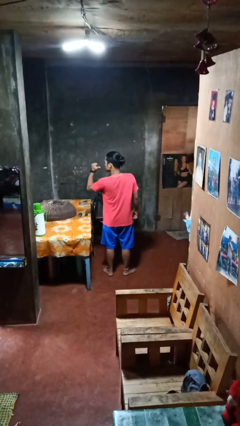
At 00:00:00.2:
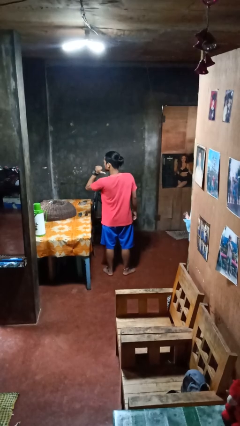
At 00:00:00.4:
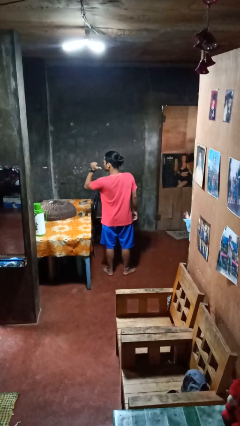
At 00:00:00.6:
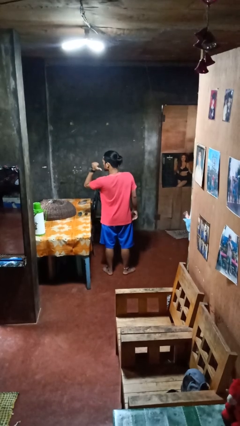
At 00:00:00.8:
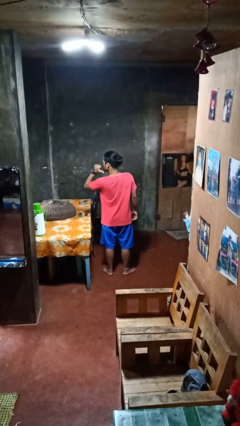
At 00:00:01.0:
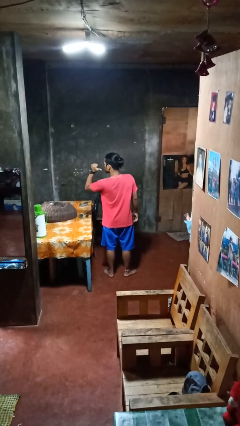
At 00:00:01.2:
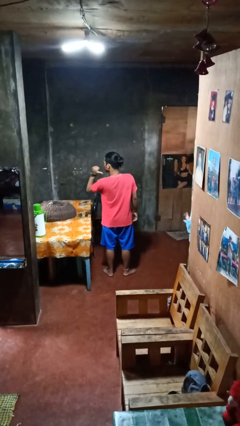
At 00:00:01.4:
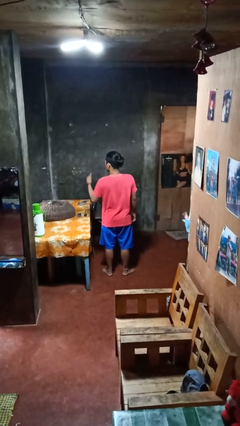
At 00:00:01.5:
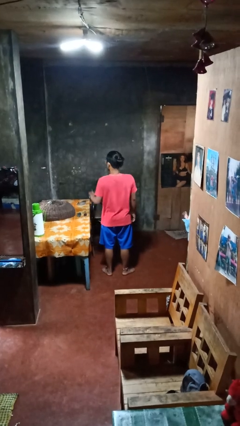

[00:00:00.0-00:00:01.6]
person gestures behind me

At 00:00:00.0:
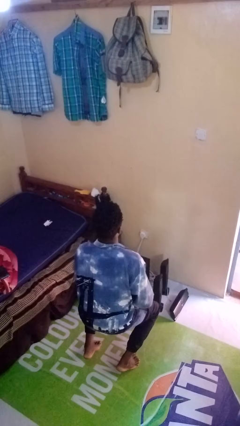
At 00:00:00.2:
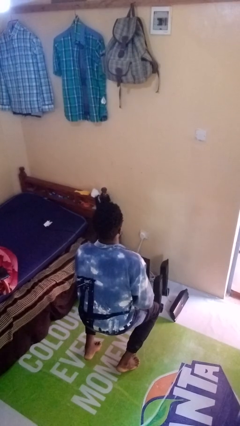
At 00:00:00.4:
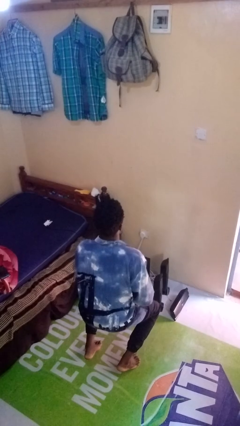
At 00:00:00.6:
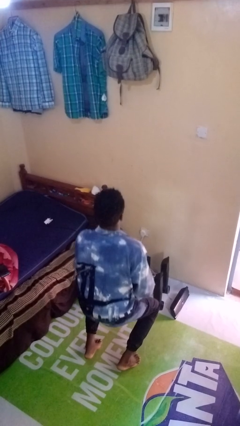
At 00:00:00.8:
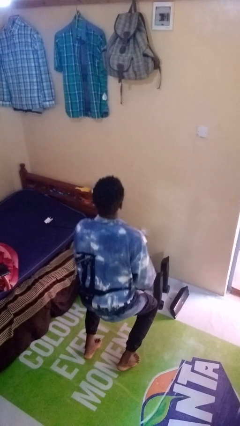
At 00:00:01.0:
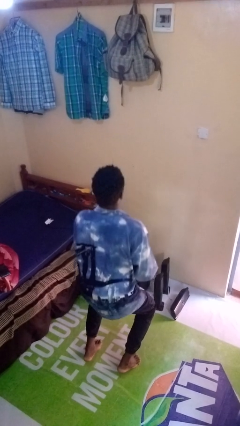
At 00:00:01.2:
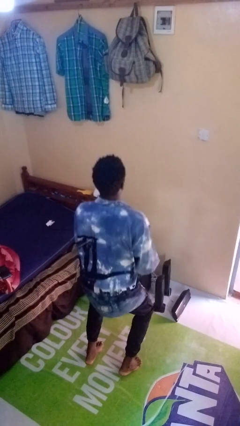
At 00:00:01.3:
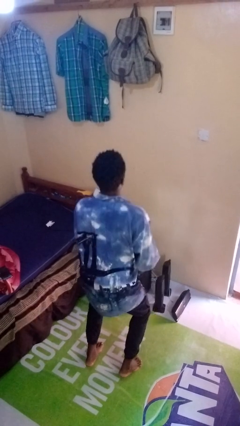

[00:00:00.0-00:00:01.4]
person stands up

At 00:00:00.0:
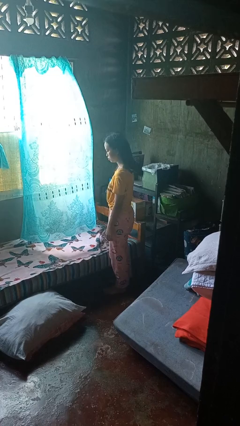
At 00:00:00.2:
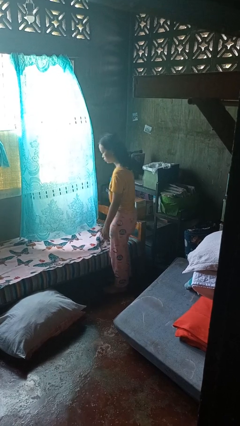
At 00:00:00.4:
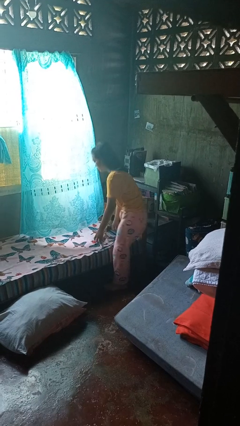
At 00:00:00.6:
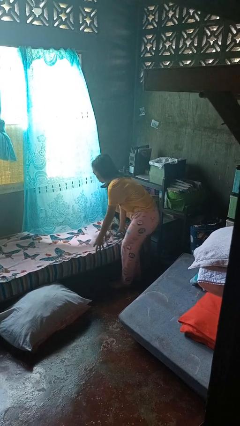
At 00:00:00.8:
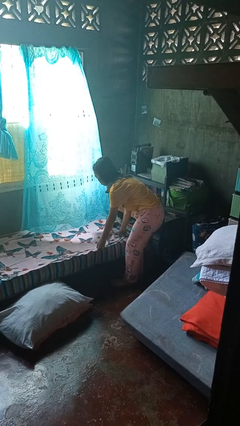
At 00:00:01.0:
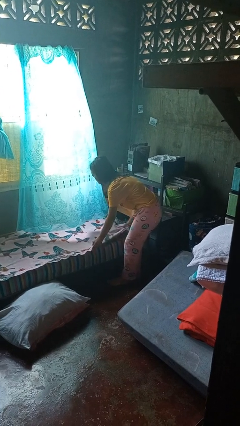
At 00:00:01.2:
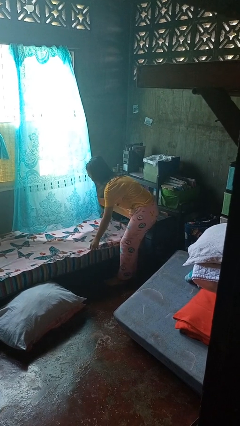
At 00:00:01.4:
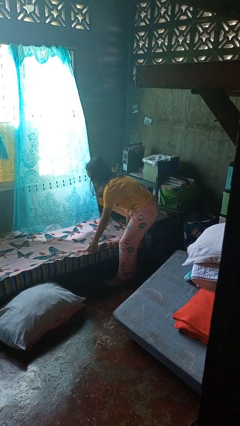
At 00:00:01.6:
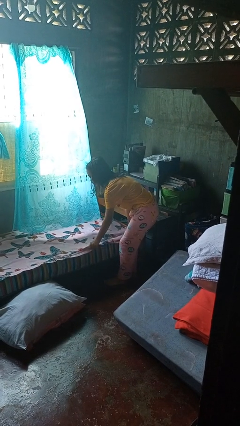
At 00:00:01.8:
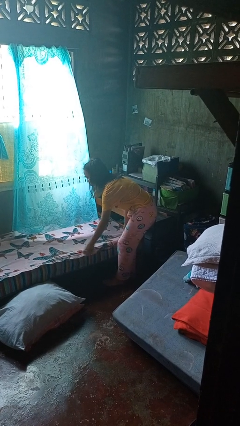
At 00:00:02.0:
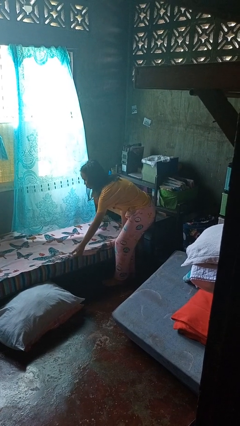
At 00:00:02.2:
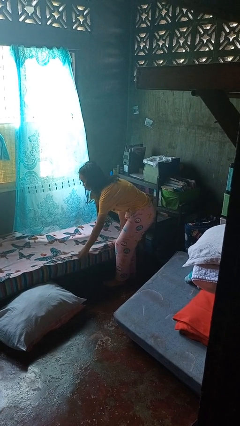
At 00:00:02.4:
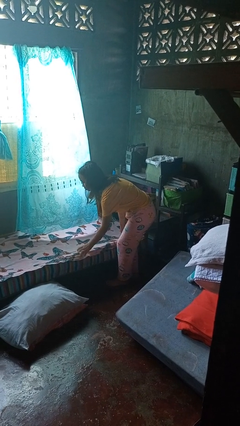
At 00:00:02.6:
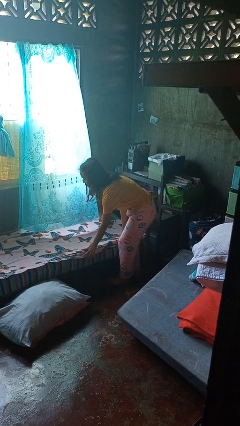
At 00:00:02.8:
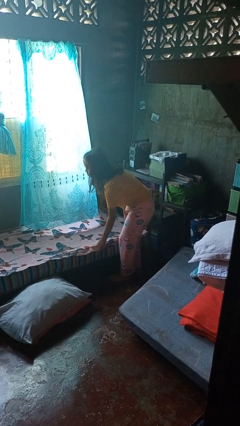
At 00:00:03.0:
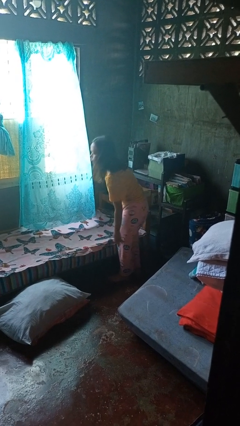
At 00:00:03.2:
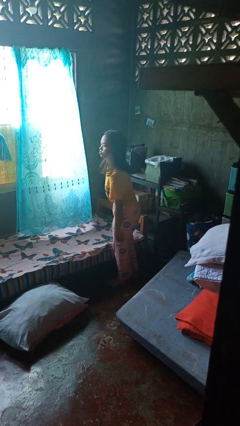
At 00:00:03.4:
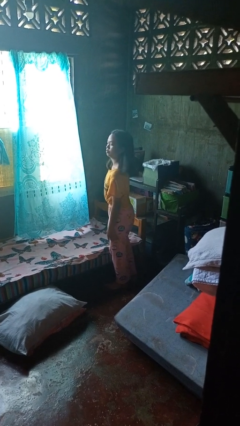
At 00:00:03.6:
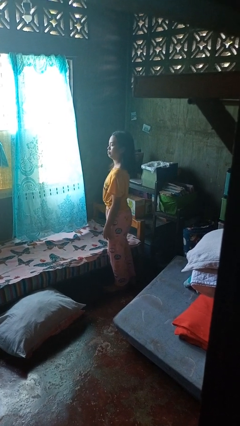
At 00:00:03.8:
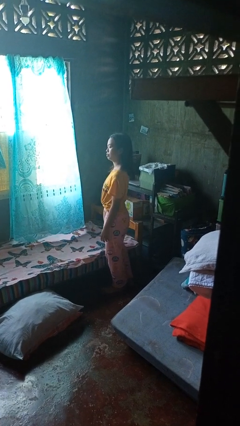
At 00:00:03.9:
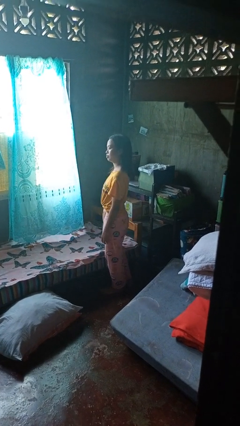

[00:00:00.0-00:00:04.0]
person makes bed

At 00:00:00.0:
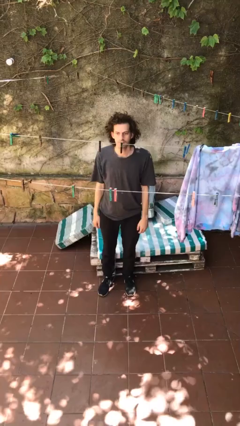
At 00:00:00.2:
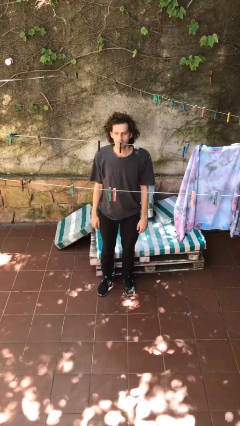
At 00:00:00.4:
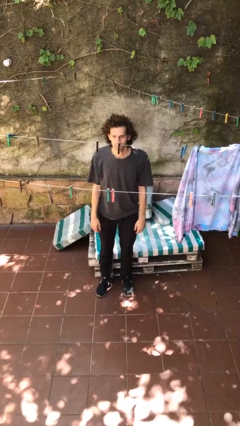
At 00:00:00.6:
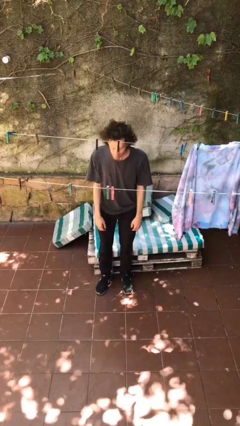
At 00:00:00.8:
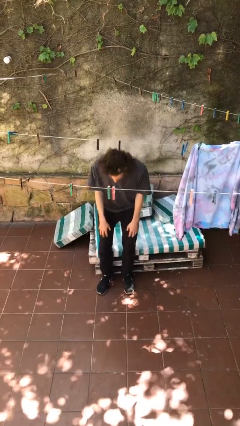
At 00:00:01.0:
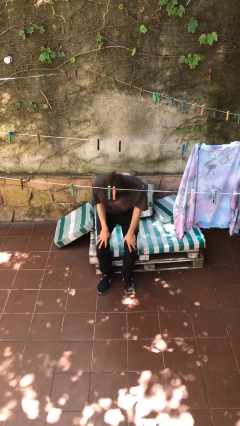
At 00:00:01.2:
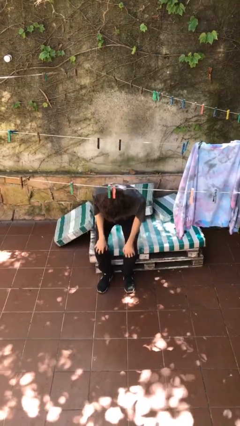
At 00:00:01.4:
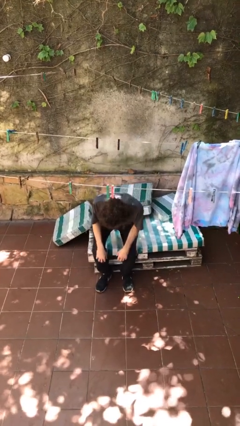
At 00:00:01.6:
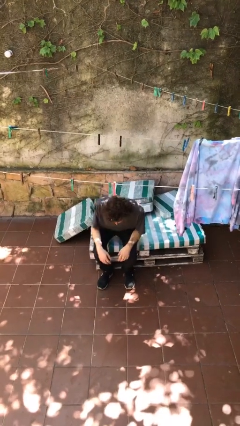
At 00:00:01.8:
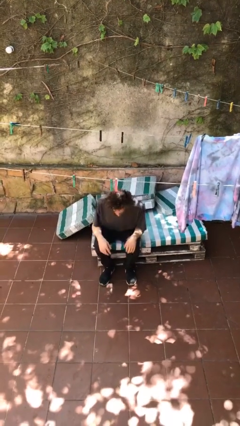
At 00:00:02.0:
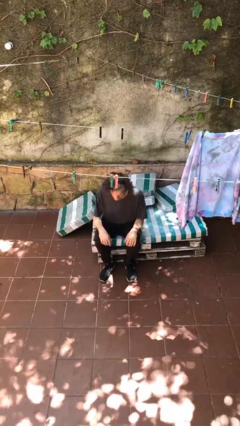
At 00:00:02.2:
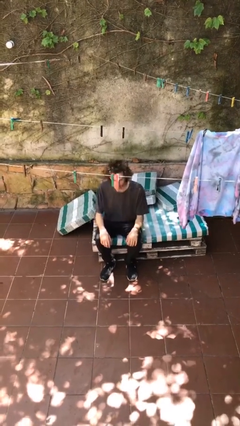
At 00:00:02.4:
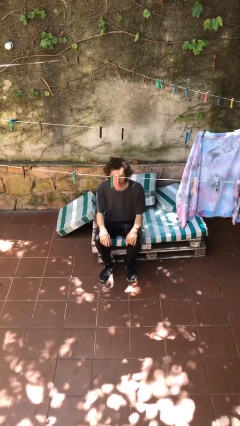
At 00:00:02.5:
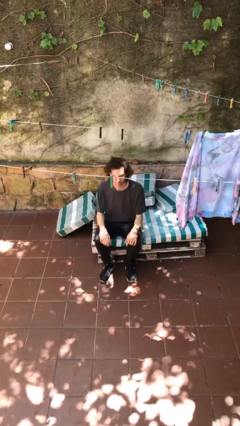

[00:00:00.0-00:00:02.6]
person sits down

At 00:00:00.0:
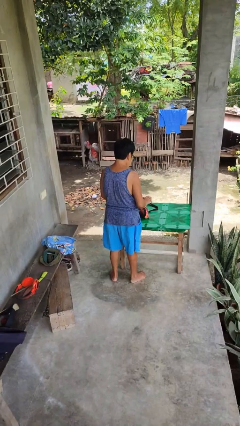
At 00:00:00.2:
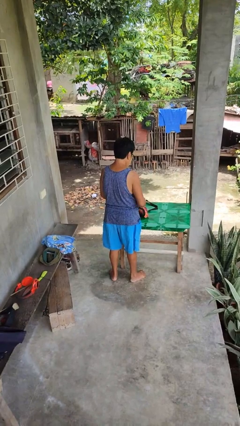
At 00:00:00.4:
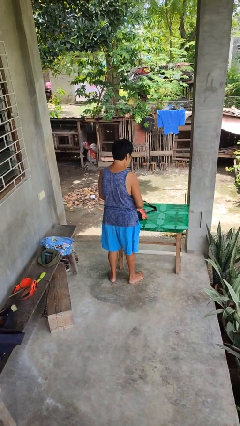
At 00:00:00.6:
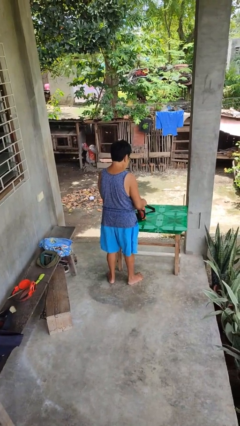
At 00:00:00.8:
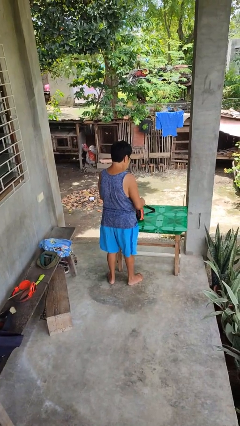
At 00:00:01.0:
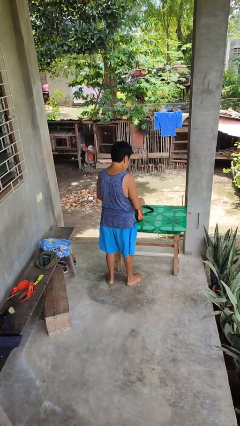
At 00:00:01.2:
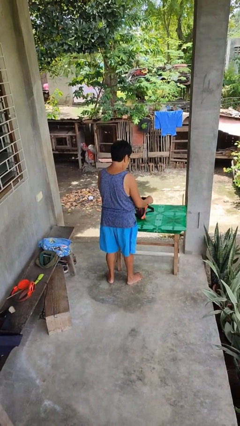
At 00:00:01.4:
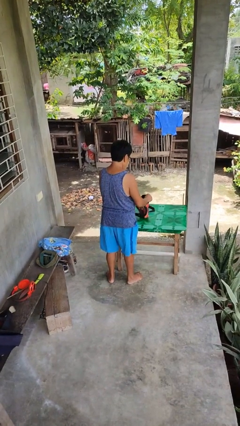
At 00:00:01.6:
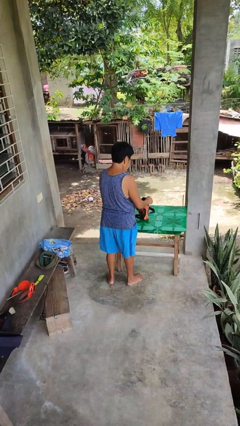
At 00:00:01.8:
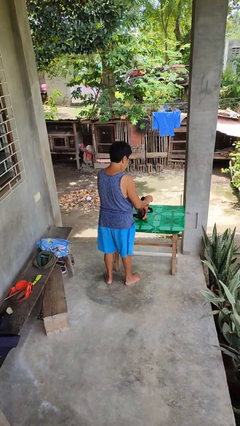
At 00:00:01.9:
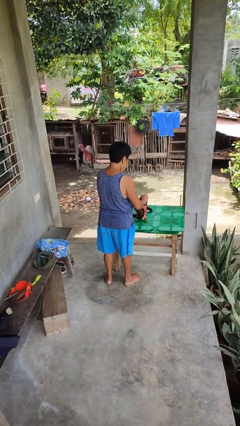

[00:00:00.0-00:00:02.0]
person searches in purse

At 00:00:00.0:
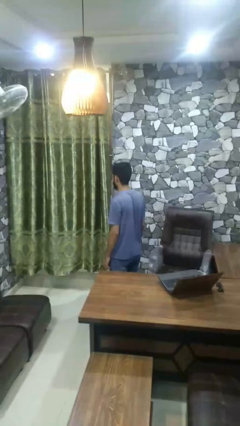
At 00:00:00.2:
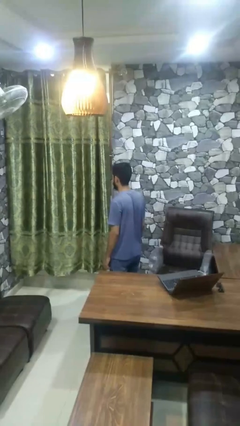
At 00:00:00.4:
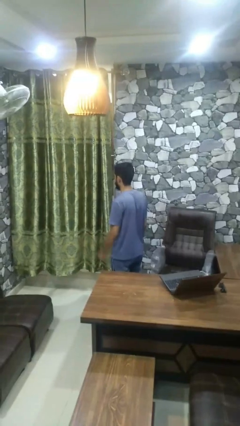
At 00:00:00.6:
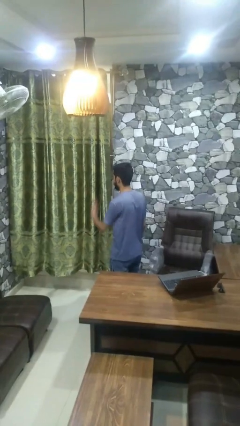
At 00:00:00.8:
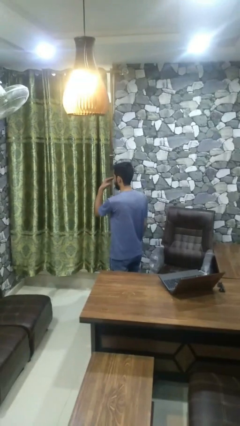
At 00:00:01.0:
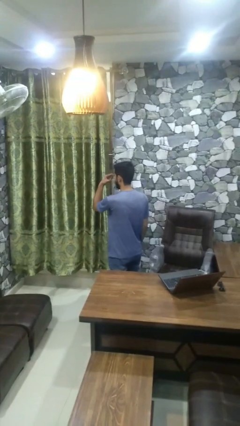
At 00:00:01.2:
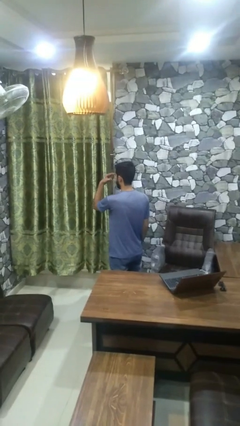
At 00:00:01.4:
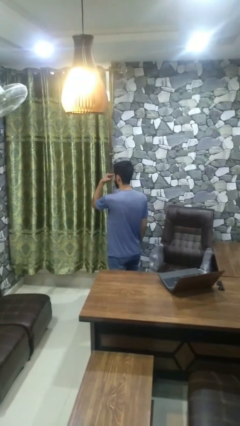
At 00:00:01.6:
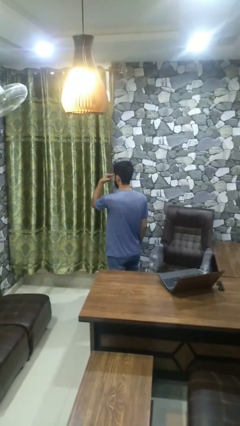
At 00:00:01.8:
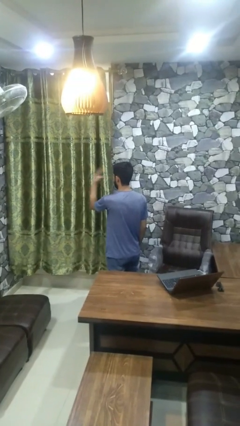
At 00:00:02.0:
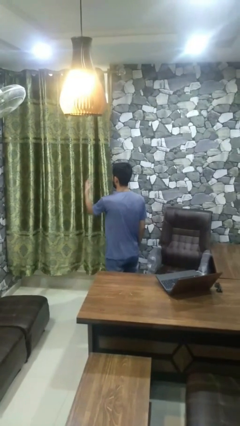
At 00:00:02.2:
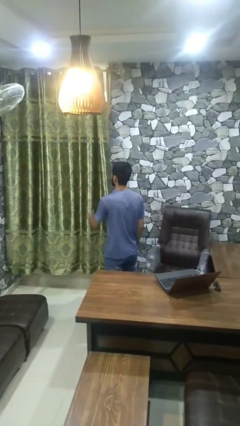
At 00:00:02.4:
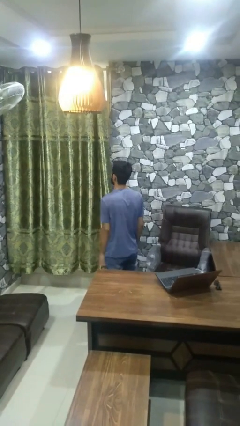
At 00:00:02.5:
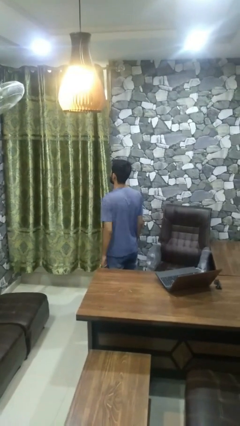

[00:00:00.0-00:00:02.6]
person gestures watch closely

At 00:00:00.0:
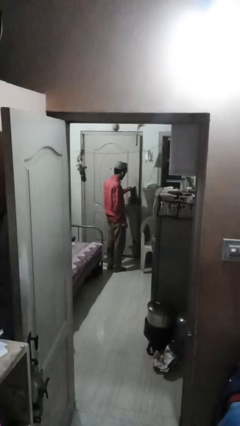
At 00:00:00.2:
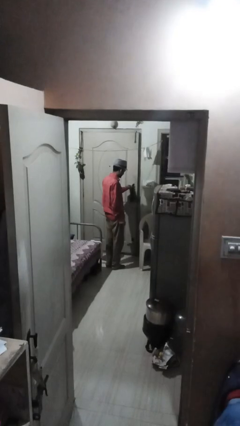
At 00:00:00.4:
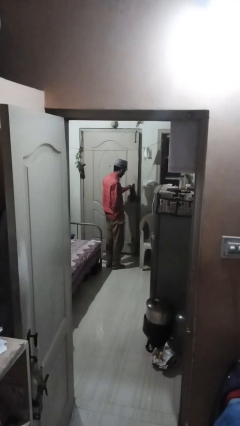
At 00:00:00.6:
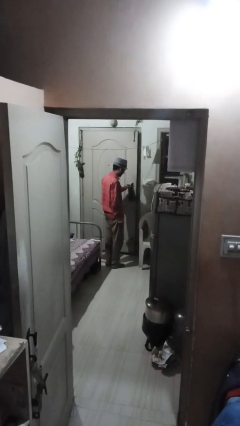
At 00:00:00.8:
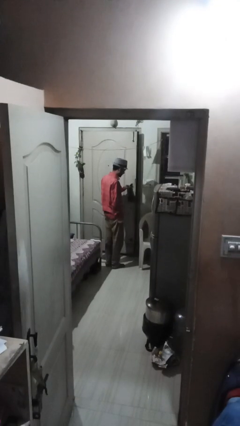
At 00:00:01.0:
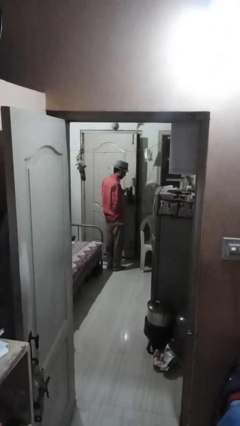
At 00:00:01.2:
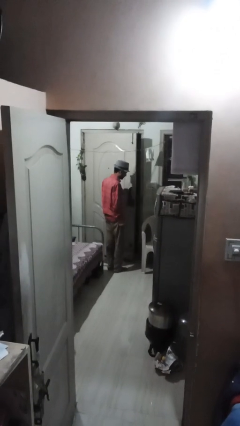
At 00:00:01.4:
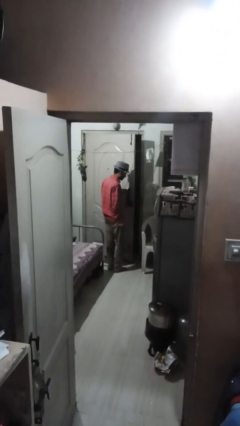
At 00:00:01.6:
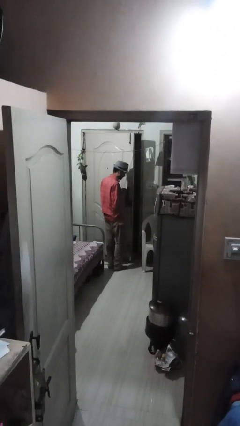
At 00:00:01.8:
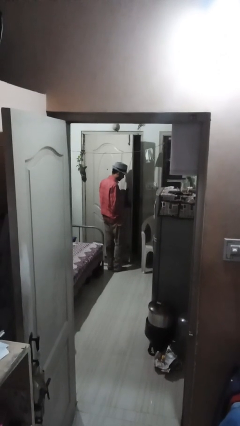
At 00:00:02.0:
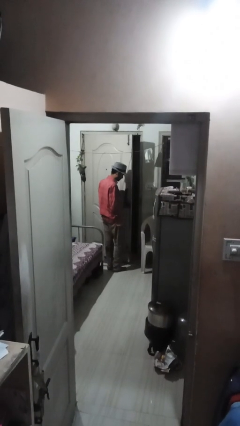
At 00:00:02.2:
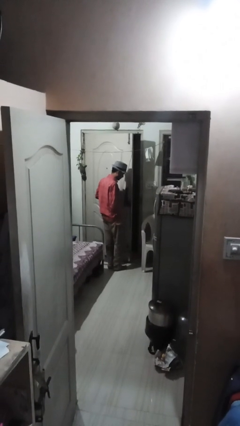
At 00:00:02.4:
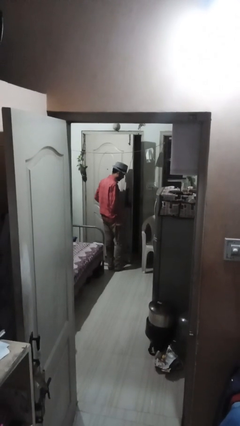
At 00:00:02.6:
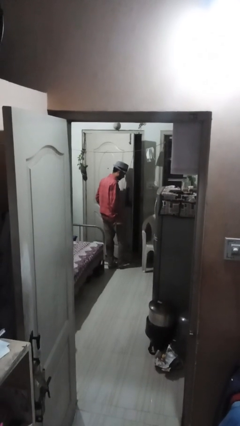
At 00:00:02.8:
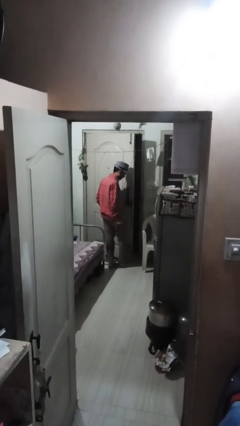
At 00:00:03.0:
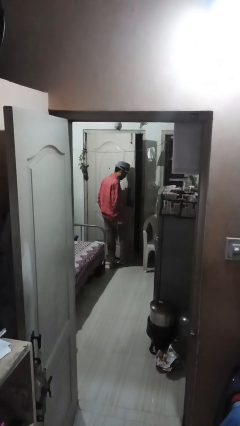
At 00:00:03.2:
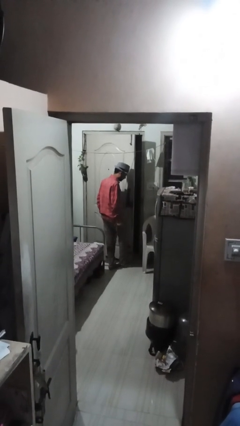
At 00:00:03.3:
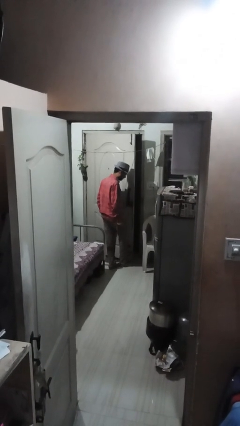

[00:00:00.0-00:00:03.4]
person opens facility door
